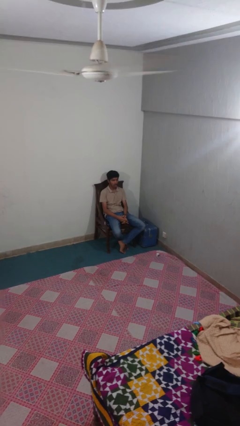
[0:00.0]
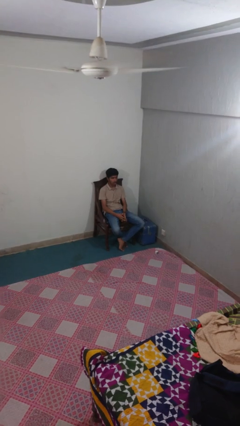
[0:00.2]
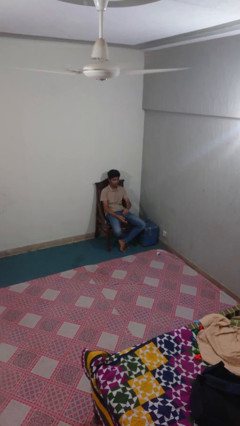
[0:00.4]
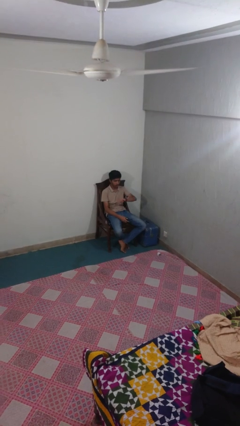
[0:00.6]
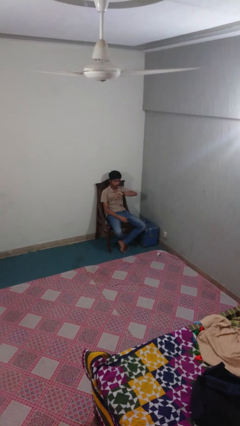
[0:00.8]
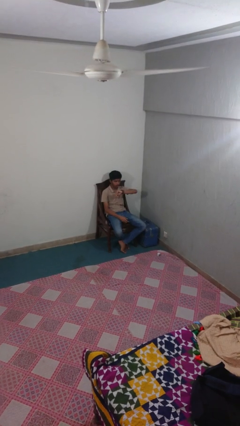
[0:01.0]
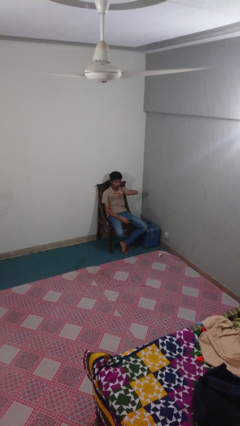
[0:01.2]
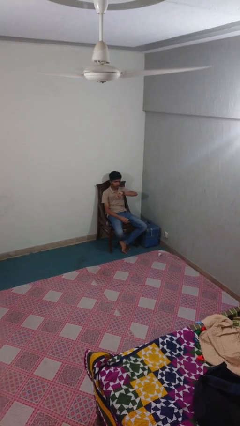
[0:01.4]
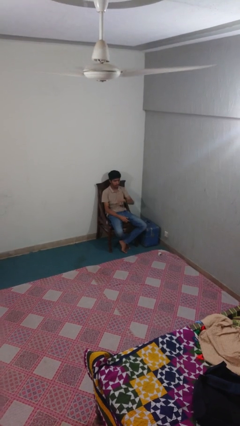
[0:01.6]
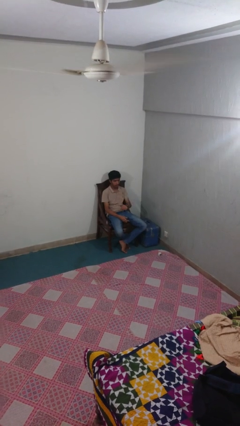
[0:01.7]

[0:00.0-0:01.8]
person looks at wristwatch

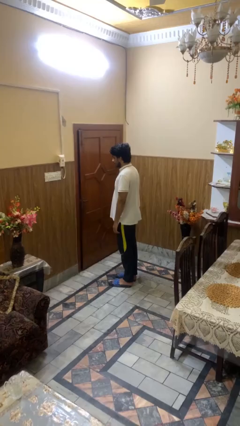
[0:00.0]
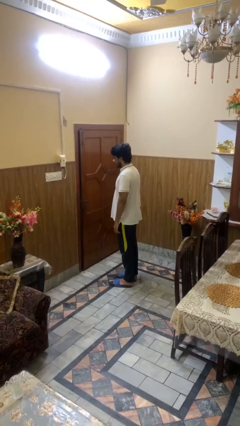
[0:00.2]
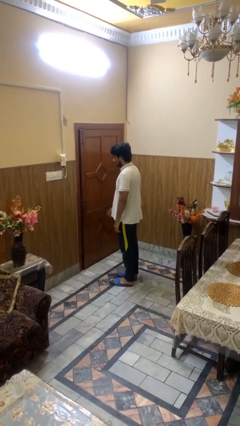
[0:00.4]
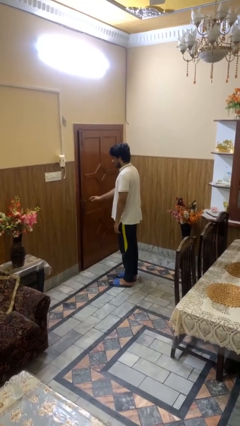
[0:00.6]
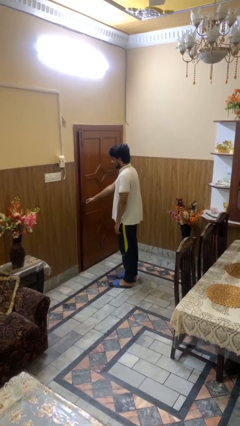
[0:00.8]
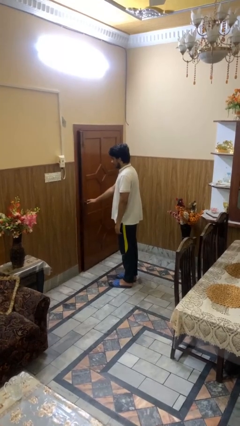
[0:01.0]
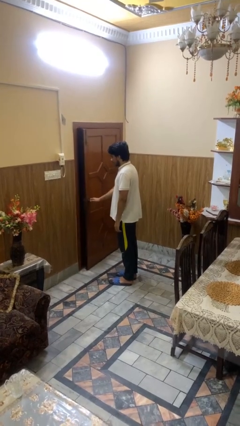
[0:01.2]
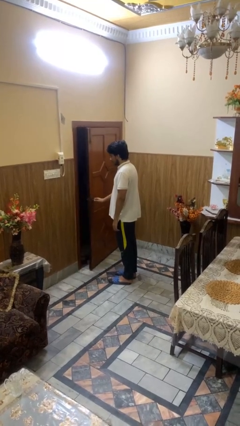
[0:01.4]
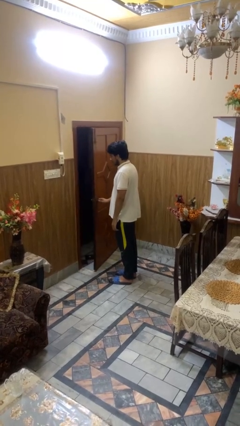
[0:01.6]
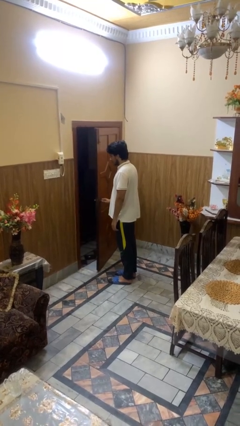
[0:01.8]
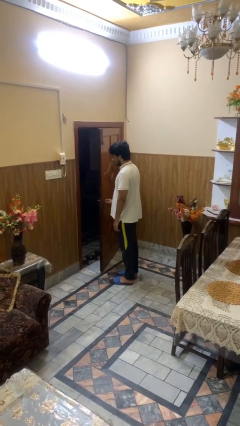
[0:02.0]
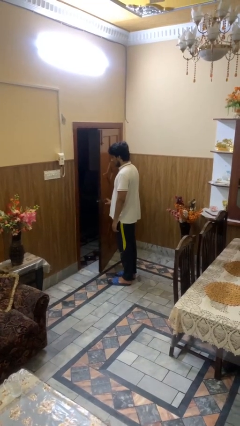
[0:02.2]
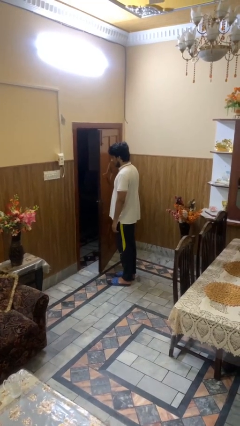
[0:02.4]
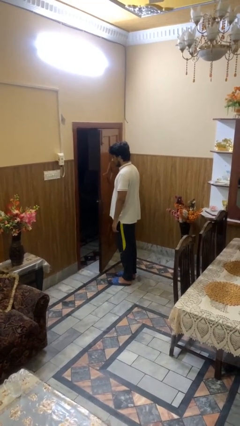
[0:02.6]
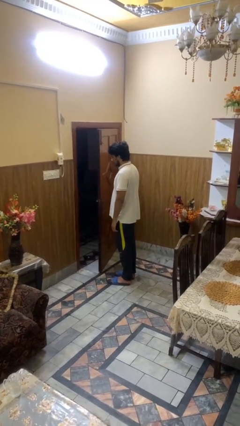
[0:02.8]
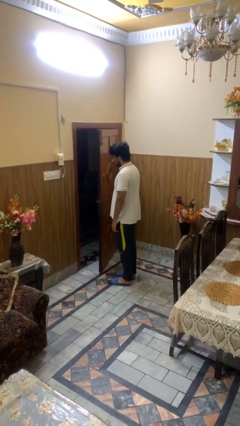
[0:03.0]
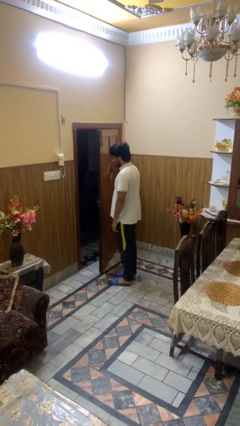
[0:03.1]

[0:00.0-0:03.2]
person opens facility door

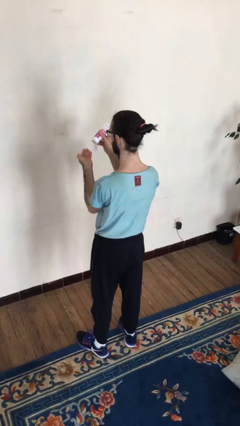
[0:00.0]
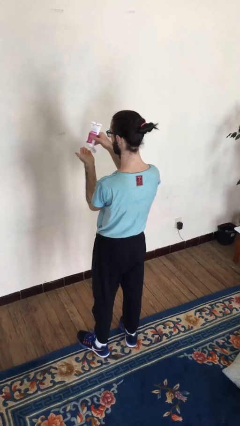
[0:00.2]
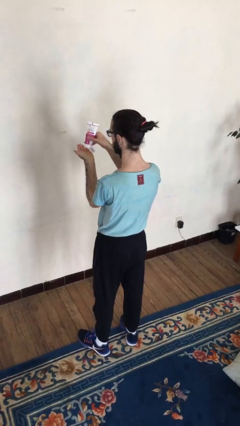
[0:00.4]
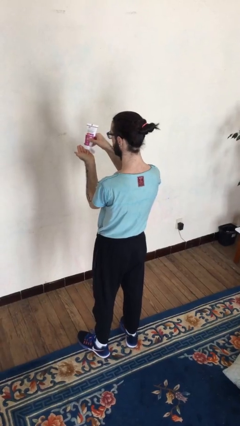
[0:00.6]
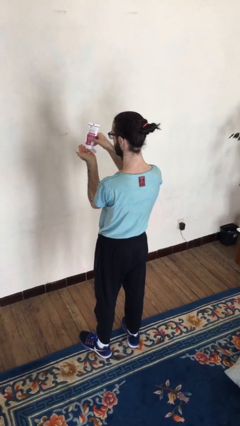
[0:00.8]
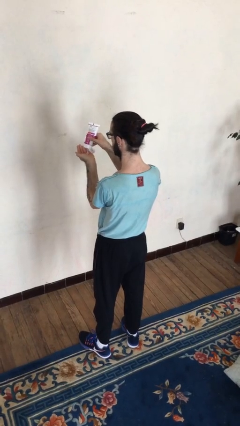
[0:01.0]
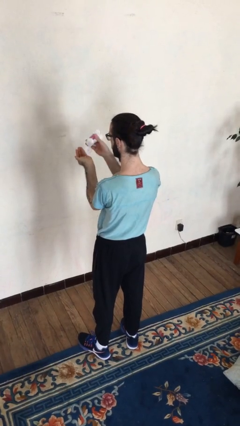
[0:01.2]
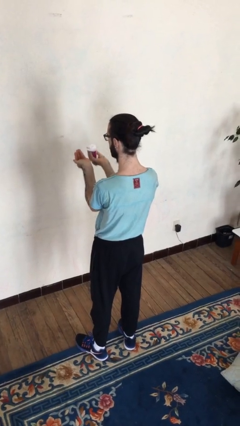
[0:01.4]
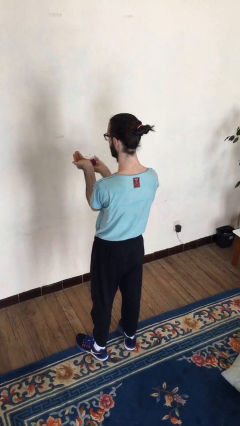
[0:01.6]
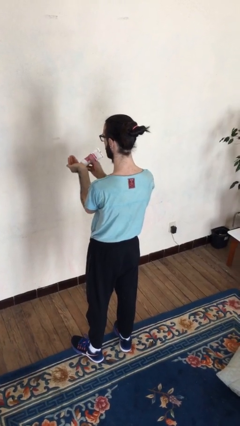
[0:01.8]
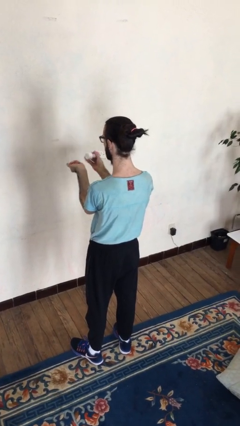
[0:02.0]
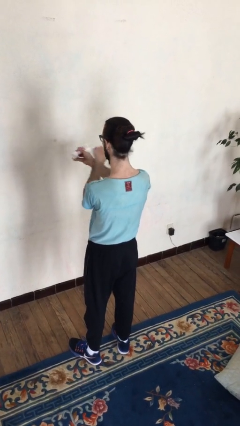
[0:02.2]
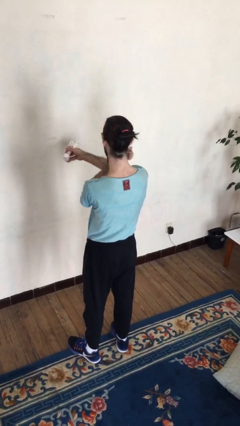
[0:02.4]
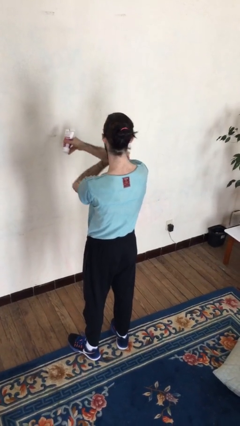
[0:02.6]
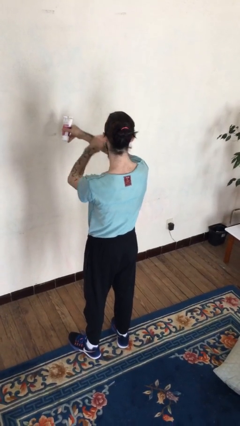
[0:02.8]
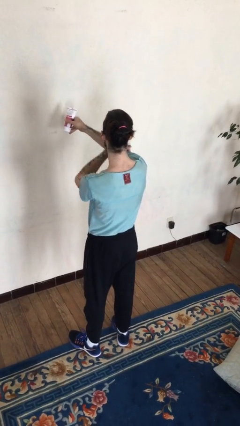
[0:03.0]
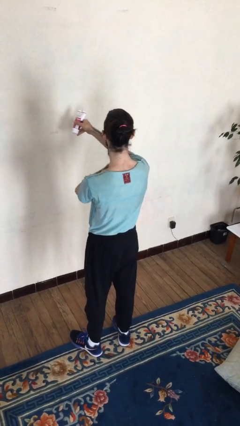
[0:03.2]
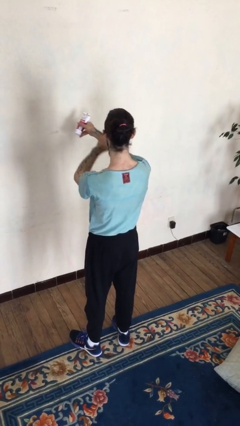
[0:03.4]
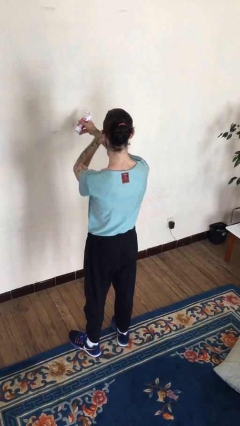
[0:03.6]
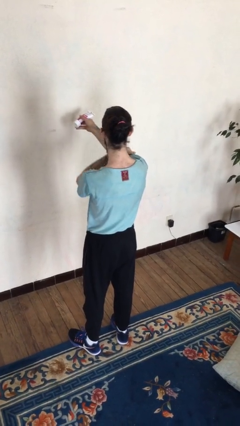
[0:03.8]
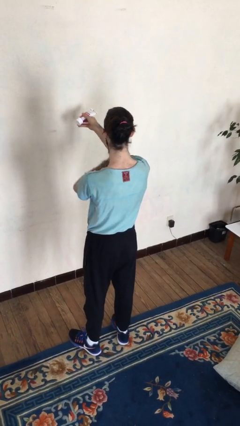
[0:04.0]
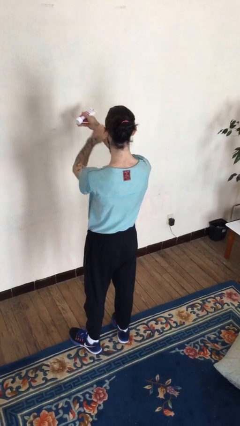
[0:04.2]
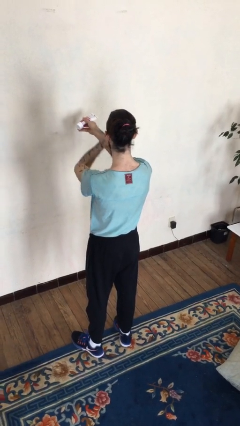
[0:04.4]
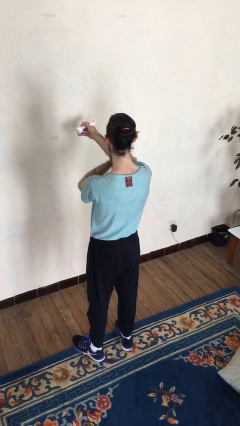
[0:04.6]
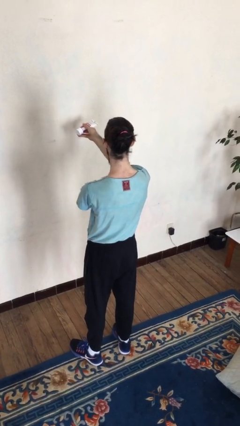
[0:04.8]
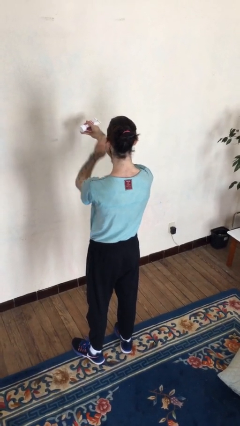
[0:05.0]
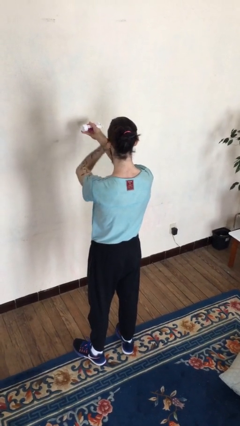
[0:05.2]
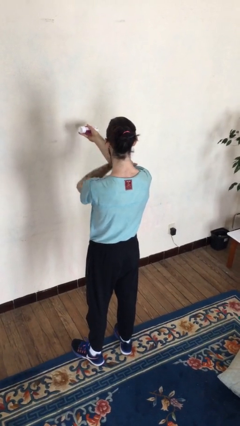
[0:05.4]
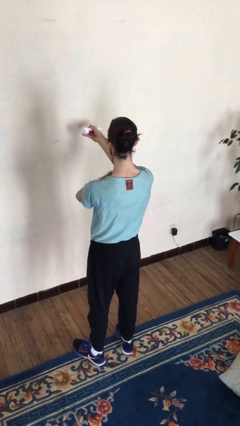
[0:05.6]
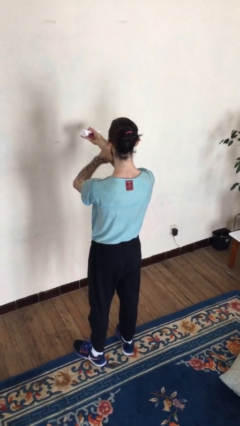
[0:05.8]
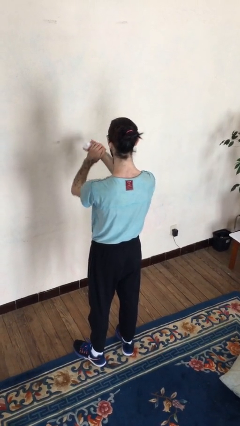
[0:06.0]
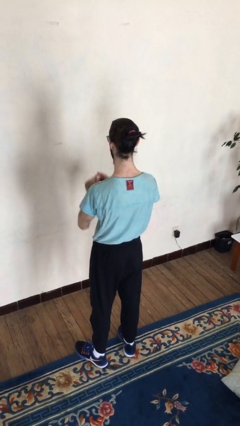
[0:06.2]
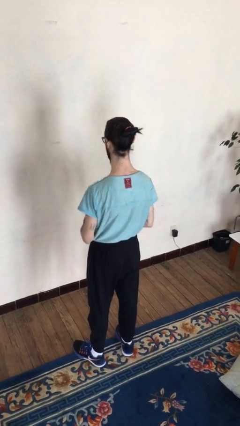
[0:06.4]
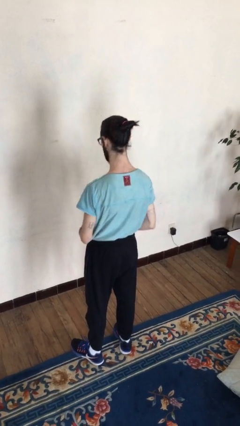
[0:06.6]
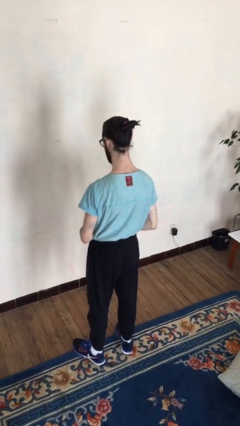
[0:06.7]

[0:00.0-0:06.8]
person applies sunscreen

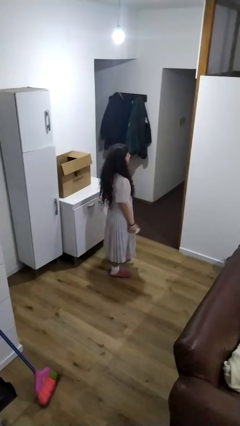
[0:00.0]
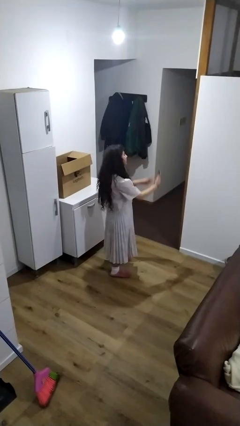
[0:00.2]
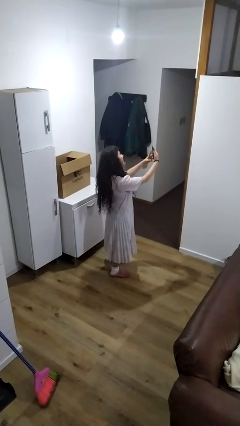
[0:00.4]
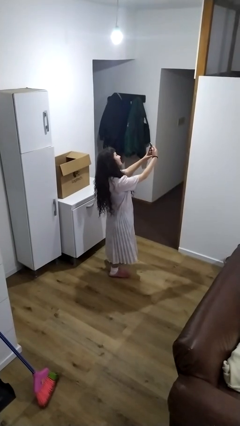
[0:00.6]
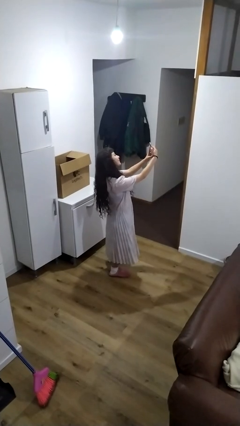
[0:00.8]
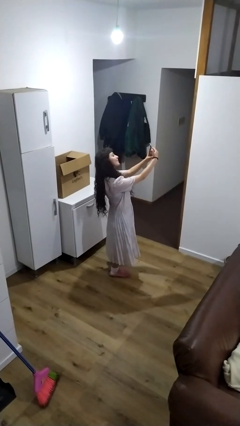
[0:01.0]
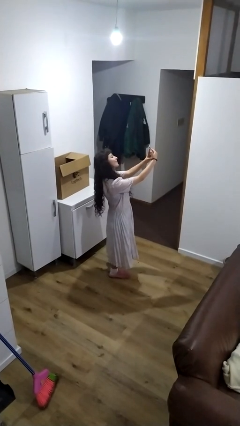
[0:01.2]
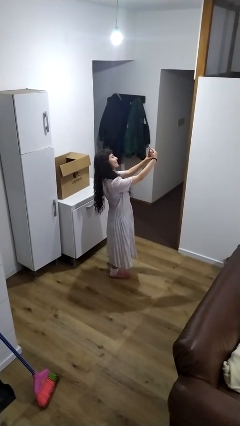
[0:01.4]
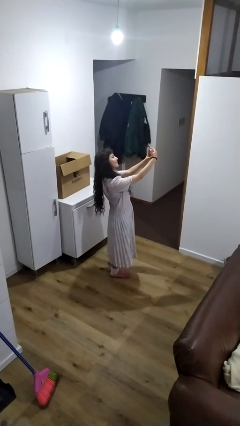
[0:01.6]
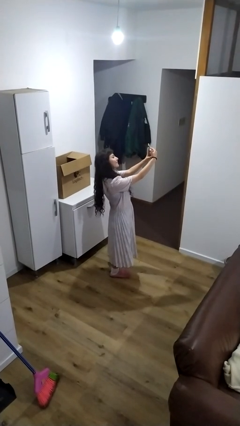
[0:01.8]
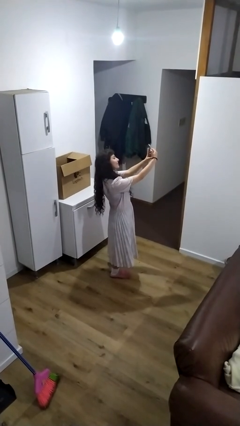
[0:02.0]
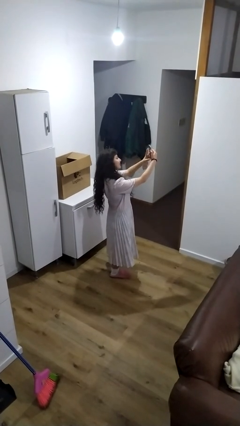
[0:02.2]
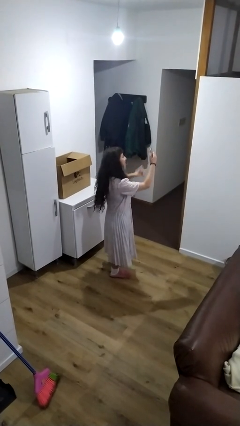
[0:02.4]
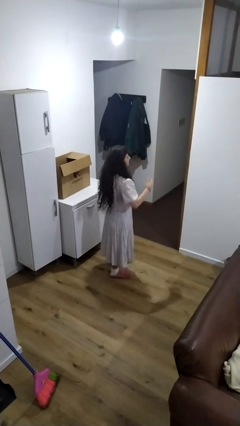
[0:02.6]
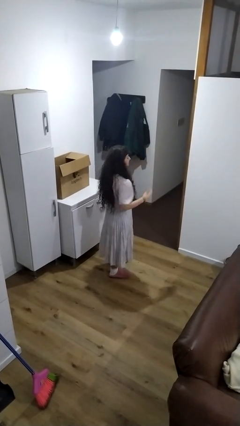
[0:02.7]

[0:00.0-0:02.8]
person takes selfie

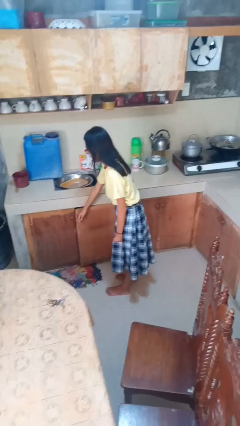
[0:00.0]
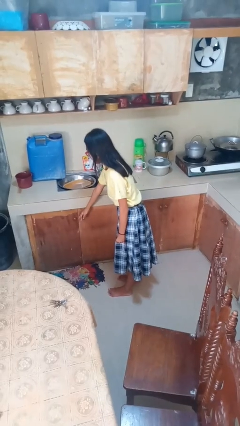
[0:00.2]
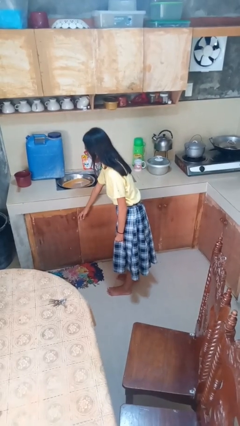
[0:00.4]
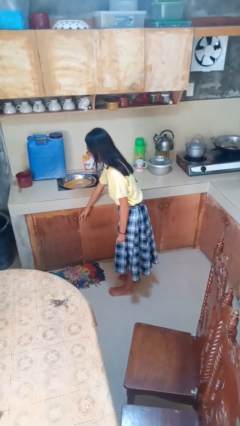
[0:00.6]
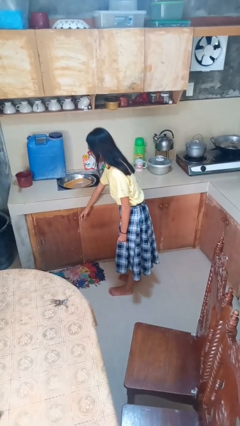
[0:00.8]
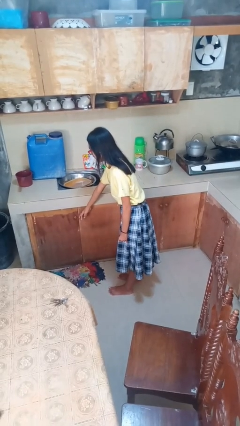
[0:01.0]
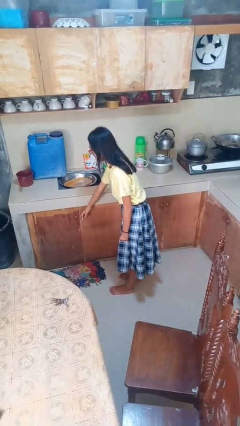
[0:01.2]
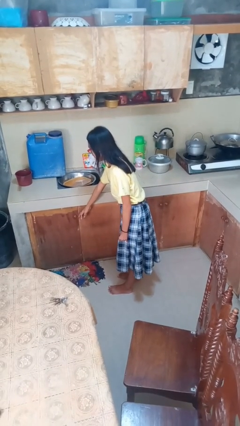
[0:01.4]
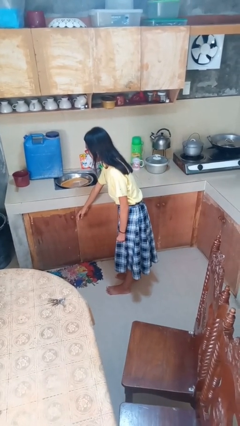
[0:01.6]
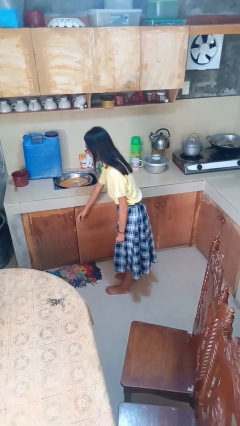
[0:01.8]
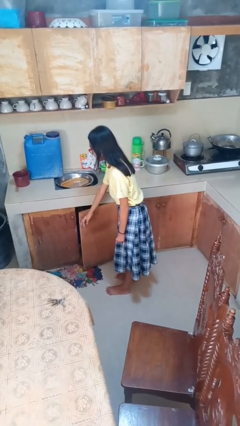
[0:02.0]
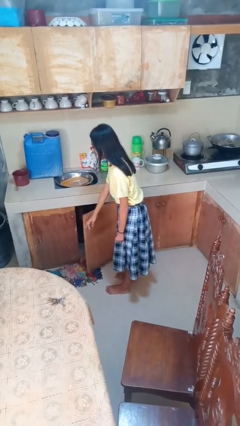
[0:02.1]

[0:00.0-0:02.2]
person closes cabinet

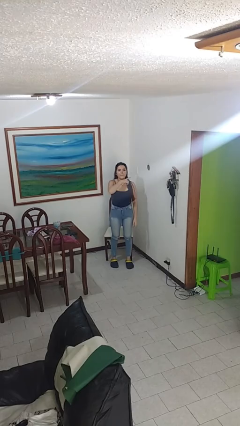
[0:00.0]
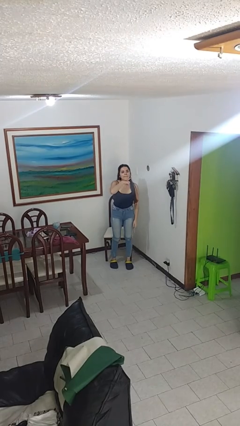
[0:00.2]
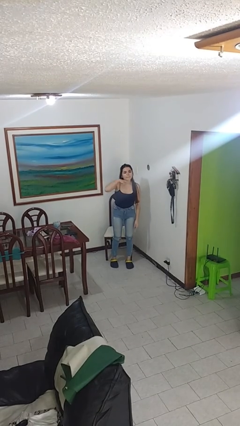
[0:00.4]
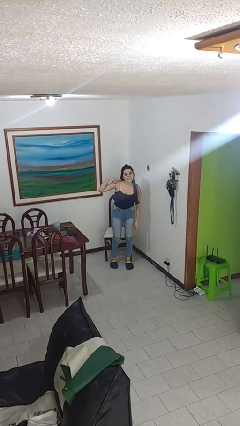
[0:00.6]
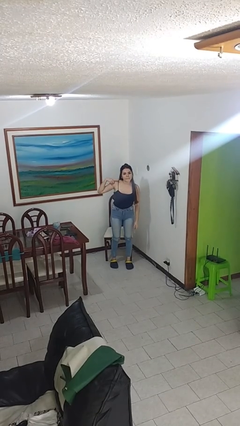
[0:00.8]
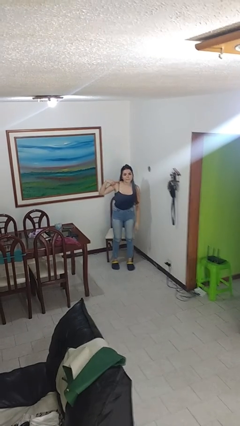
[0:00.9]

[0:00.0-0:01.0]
person gestures cut
